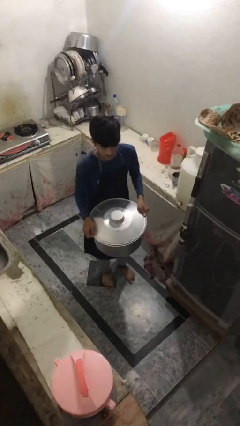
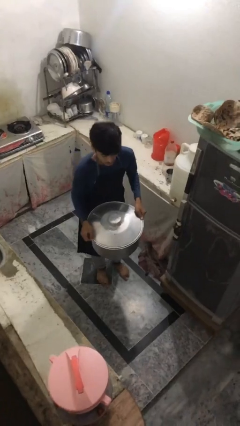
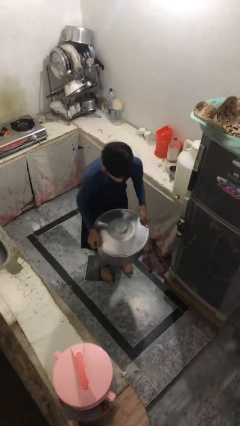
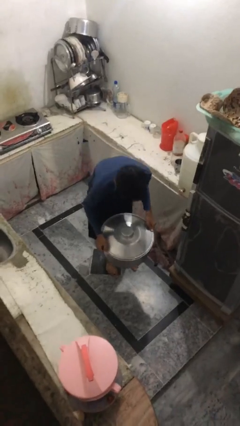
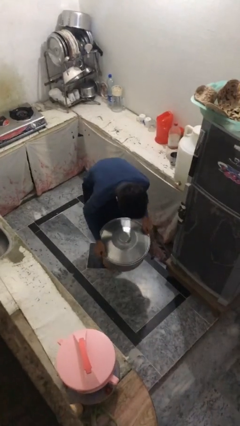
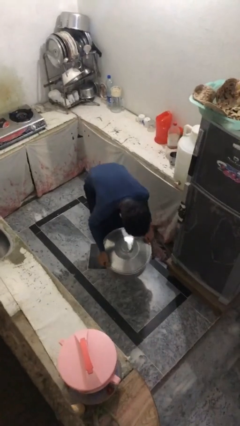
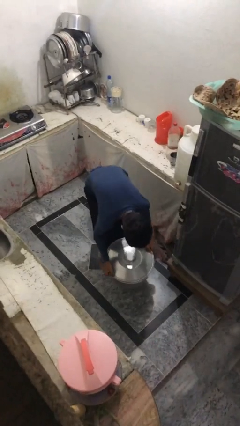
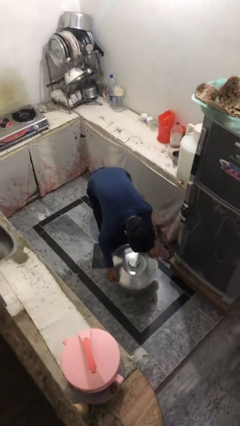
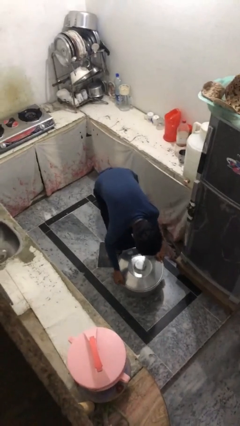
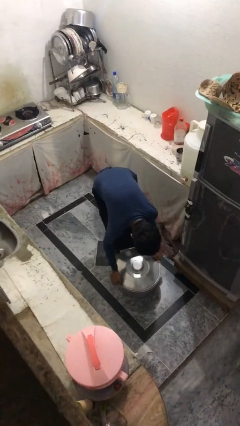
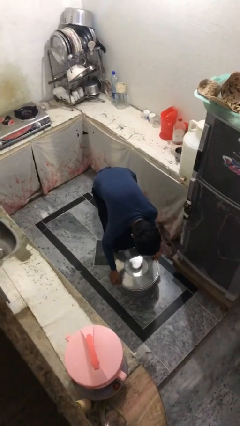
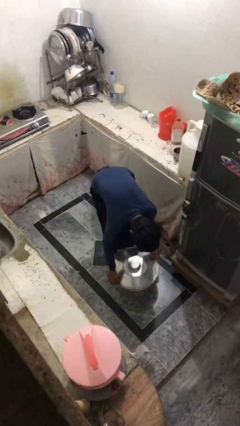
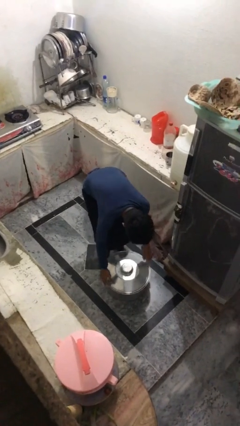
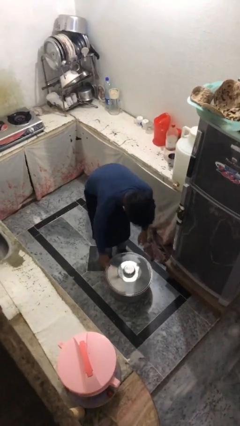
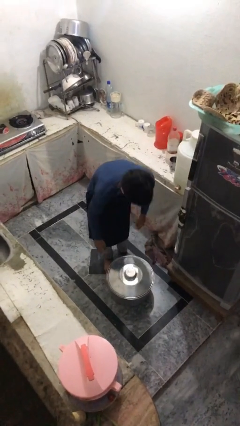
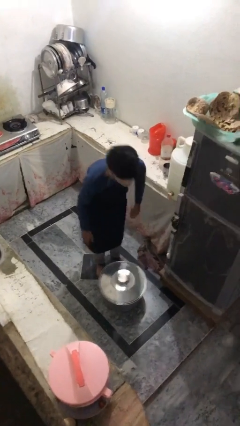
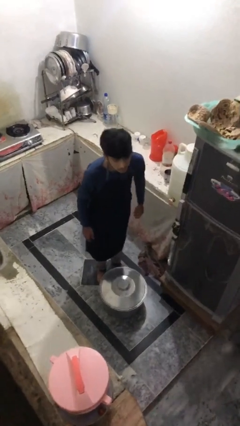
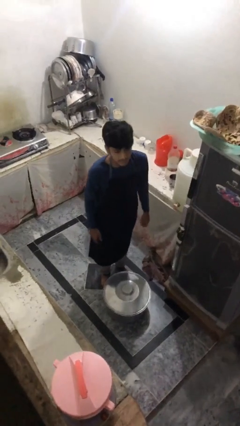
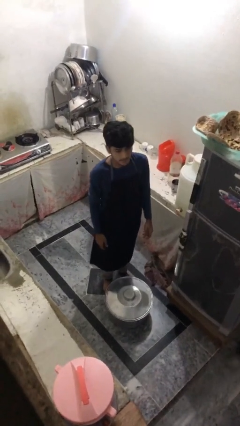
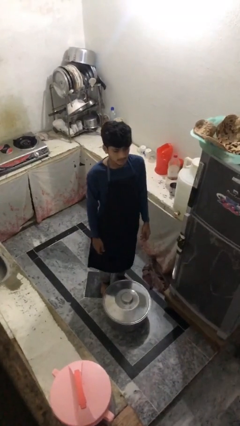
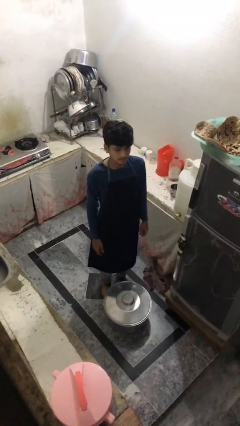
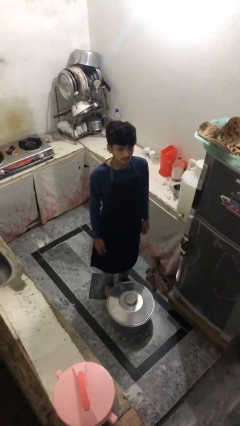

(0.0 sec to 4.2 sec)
person puts down object on floor

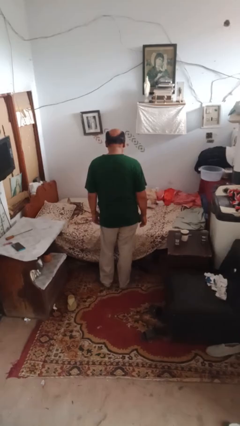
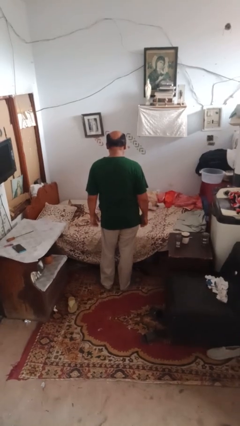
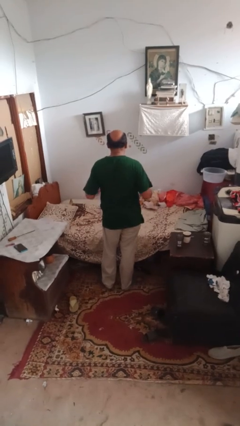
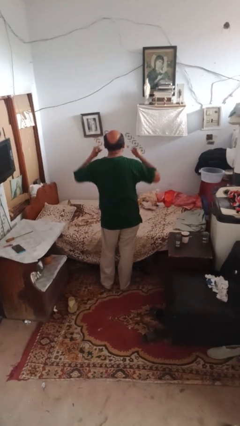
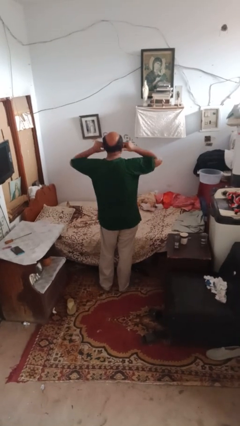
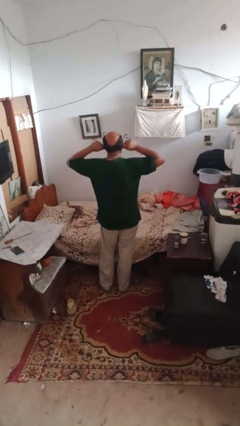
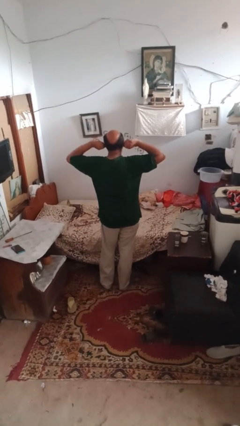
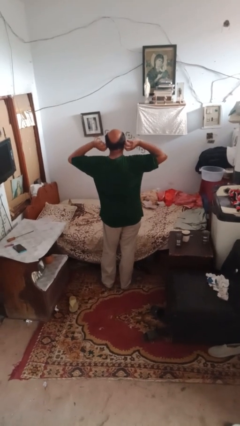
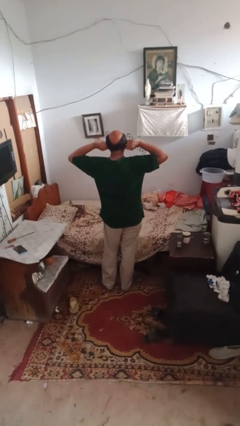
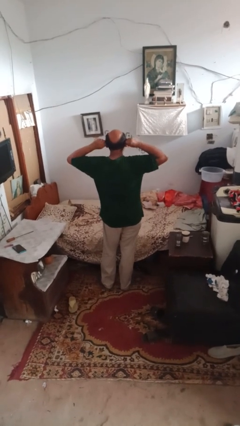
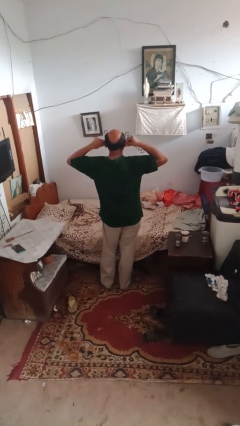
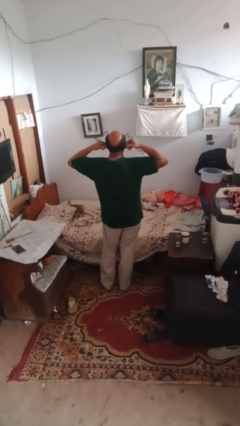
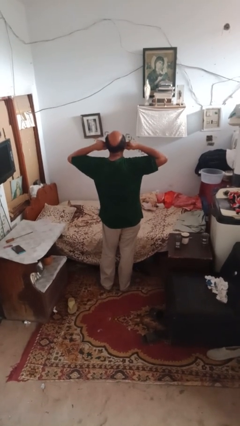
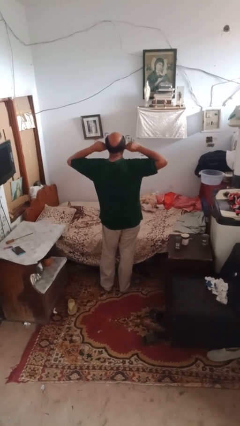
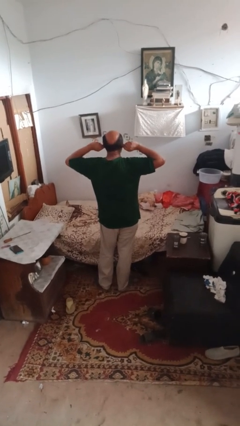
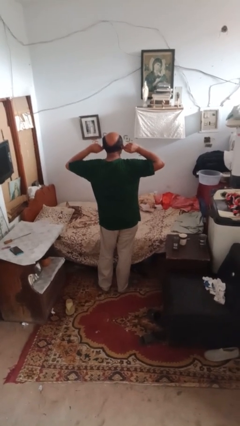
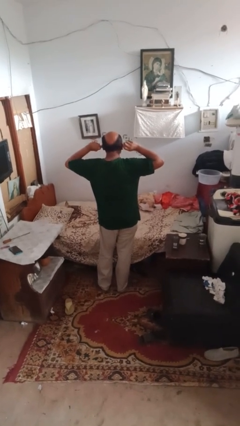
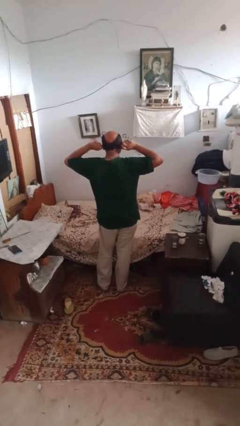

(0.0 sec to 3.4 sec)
person touches earlobe

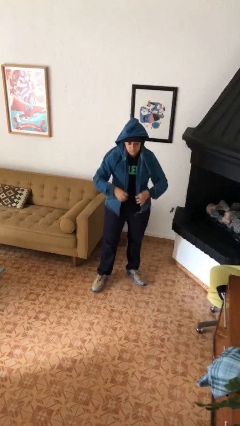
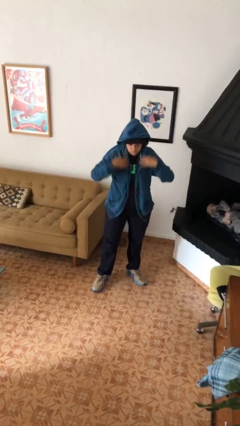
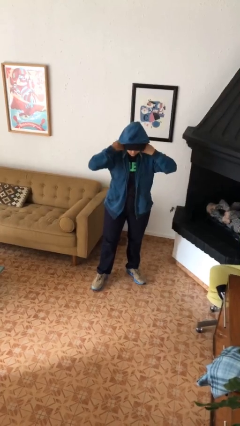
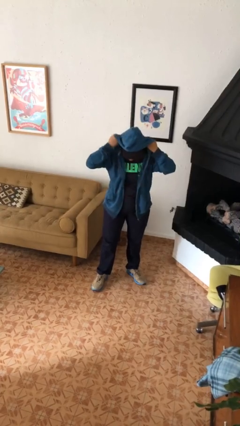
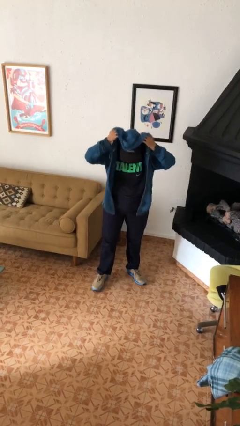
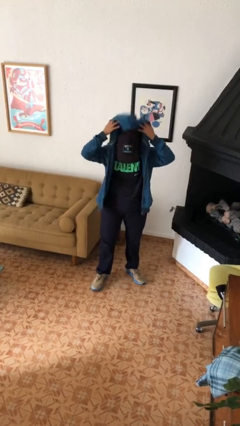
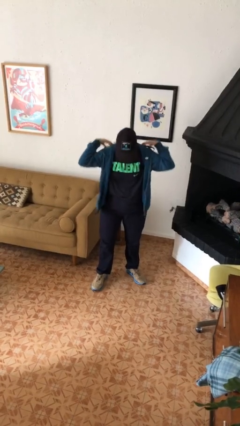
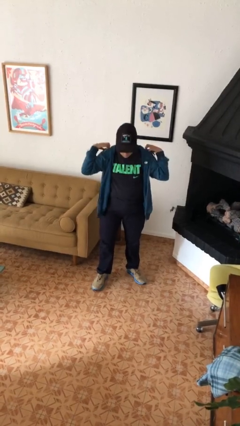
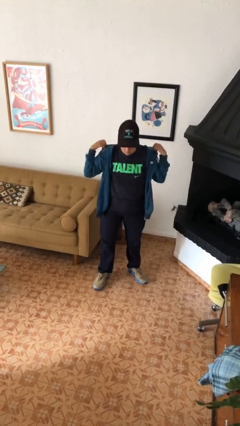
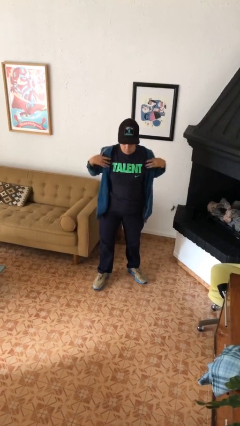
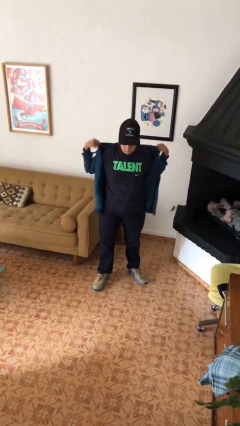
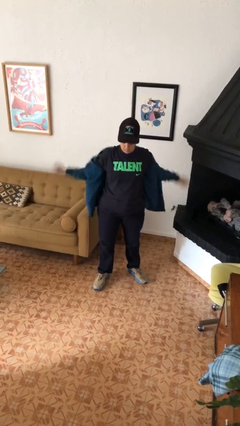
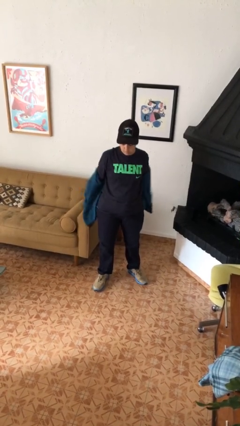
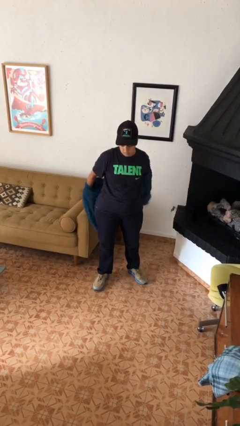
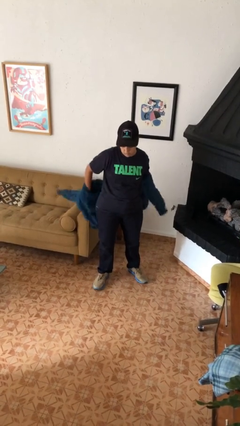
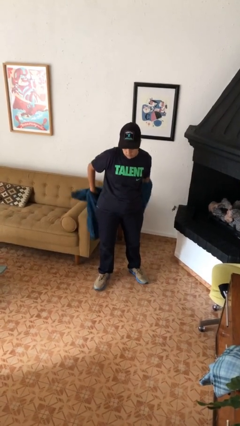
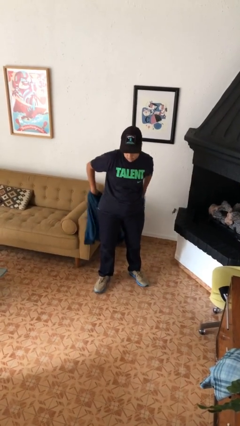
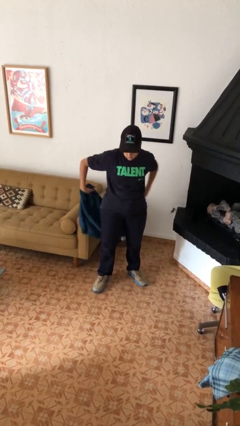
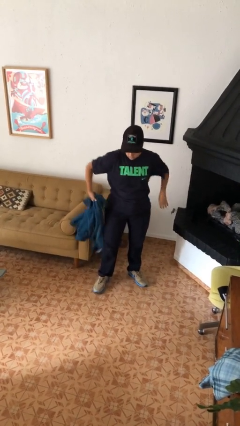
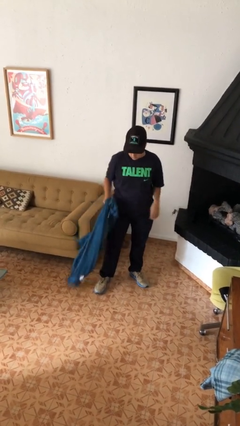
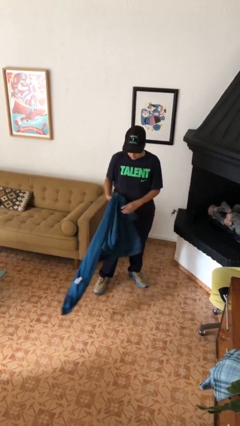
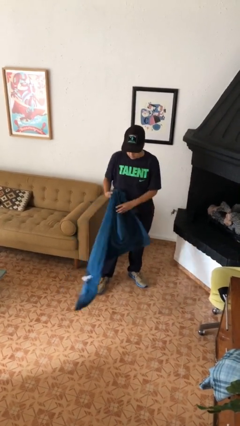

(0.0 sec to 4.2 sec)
person takes off hoodie

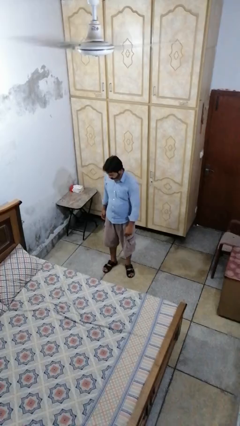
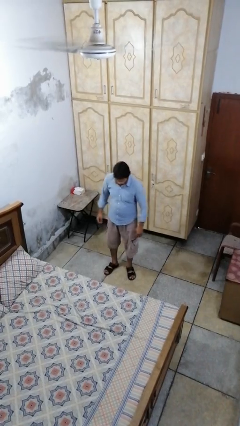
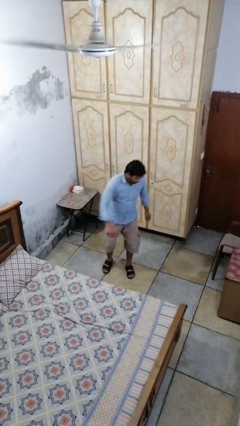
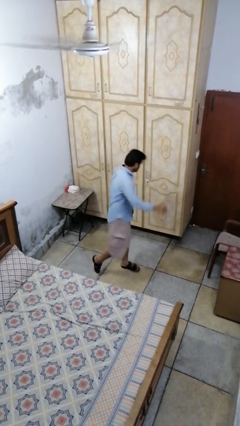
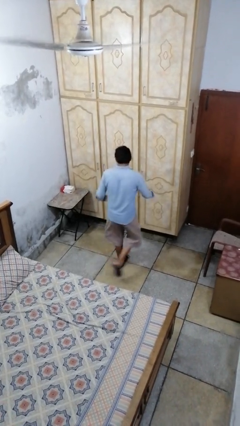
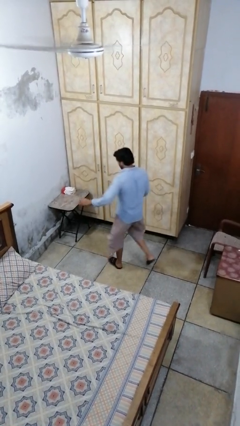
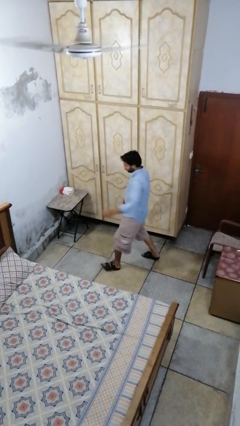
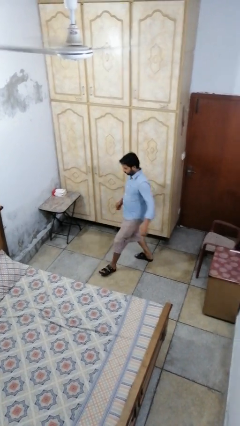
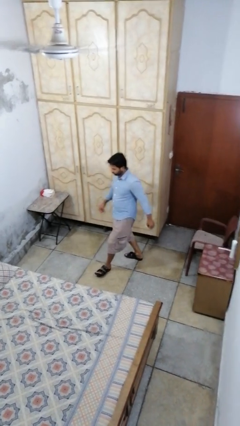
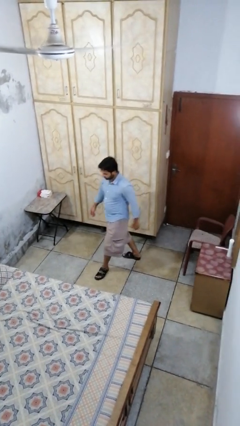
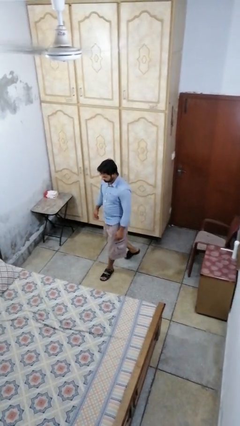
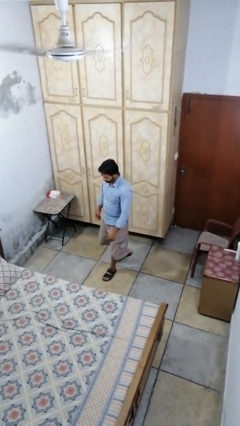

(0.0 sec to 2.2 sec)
person twirls

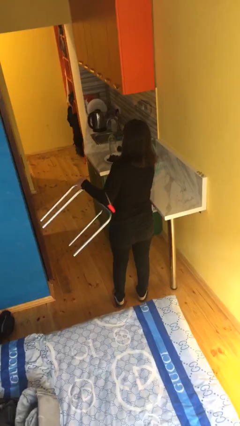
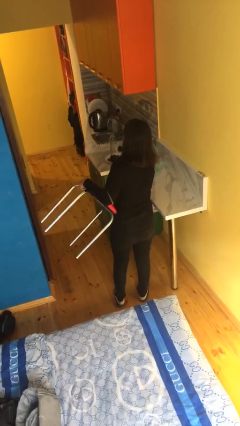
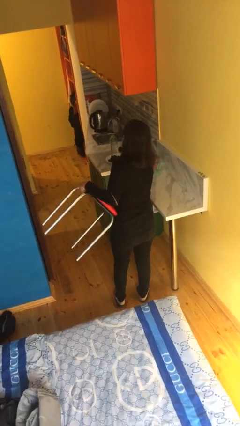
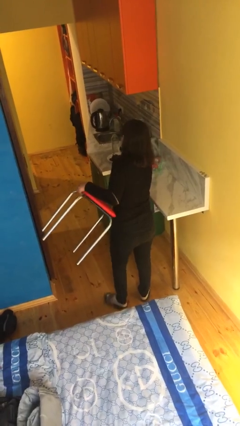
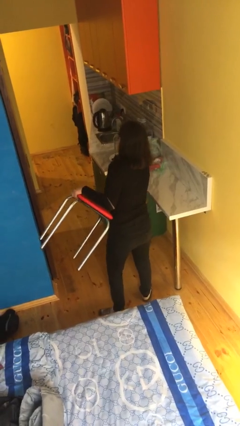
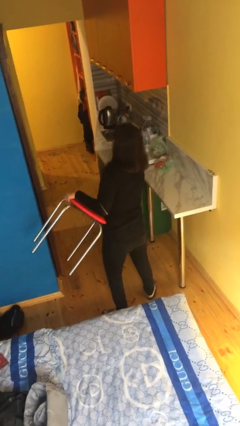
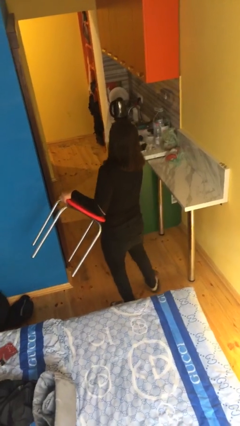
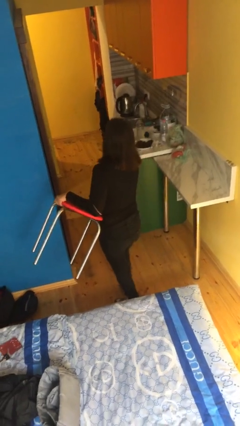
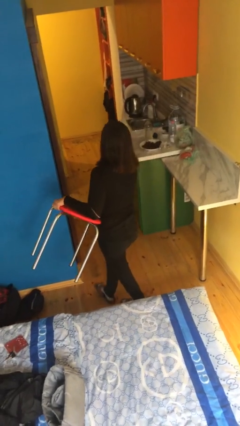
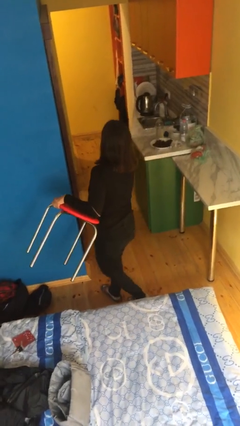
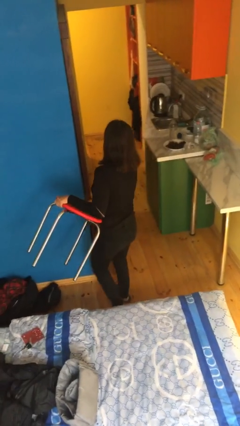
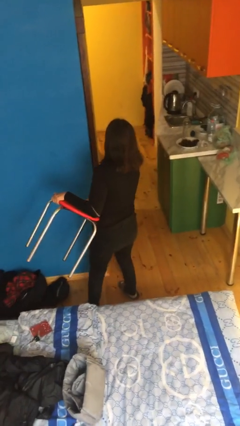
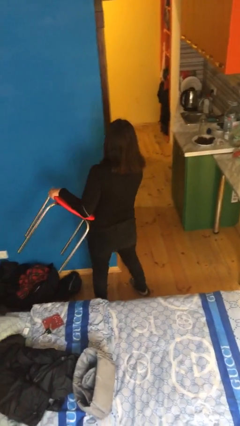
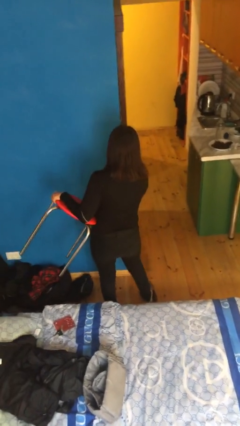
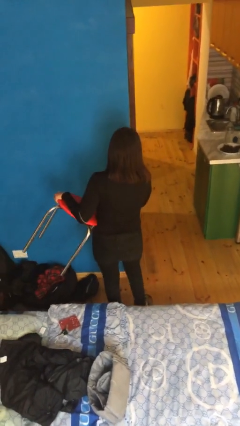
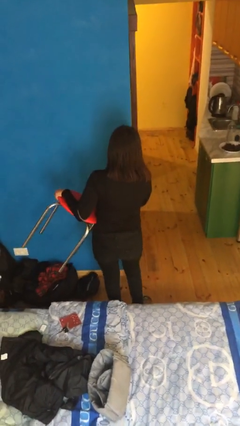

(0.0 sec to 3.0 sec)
person carries furniture

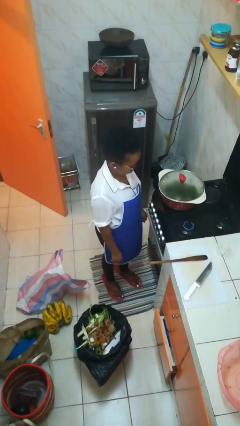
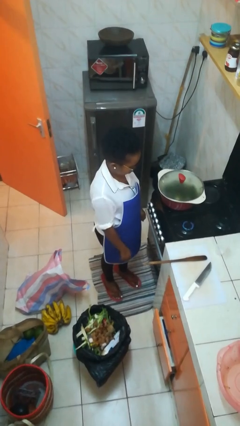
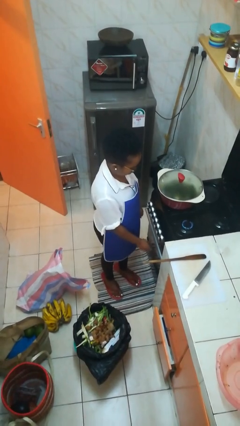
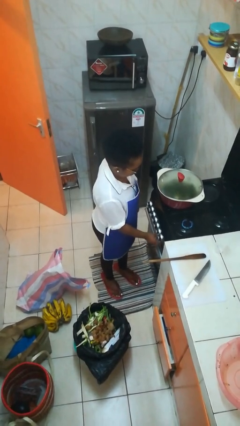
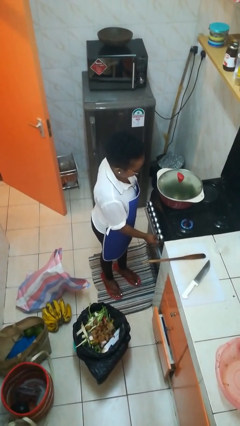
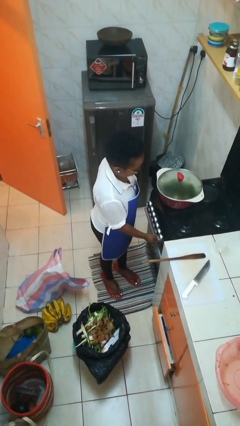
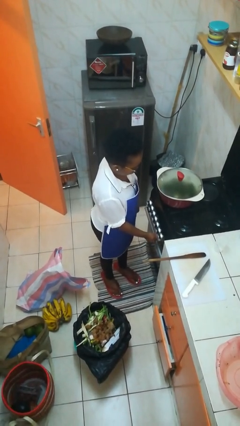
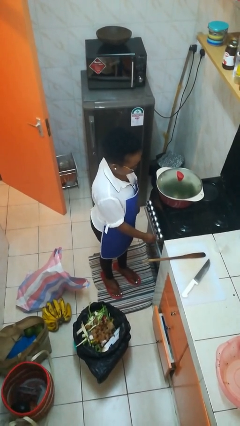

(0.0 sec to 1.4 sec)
person turns off stovetop
